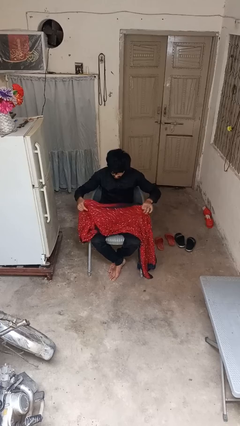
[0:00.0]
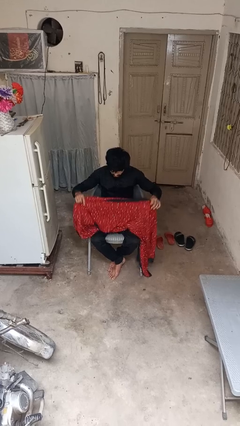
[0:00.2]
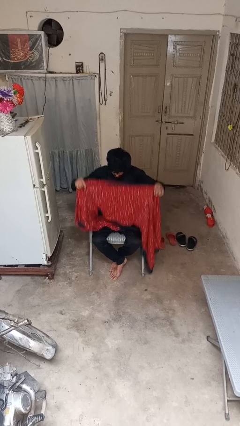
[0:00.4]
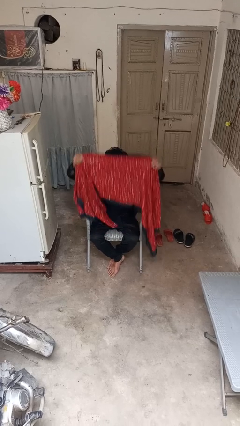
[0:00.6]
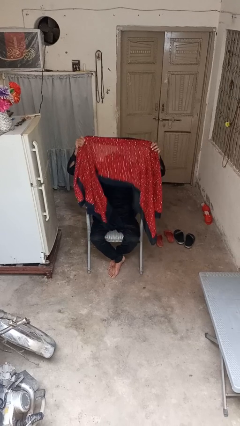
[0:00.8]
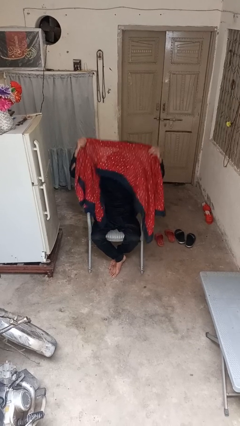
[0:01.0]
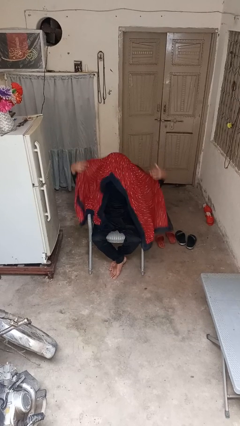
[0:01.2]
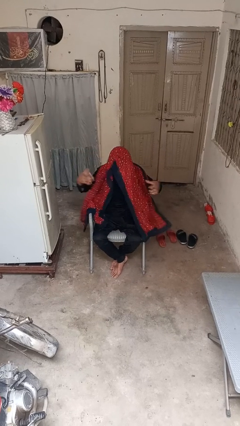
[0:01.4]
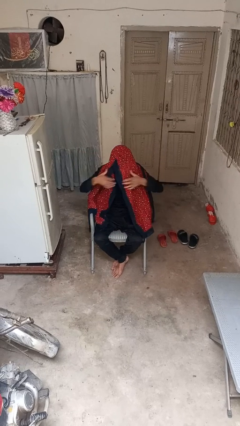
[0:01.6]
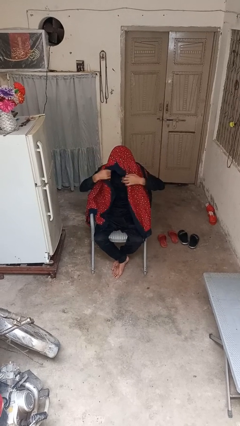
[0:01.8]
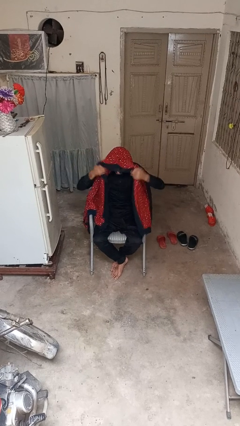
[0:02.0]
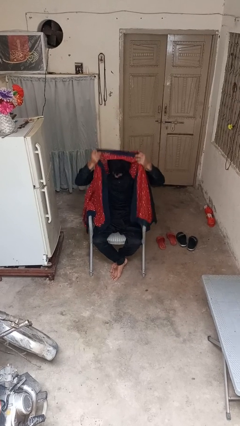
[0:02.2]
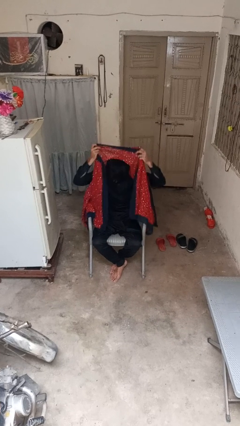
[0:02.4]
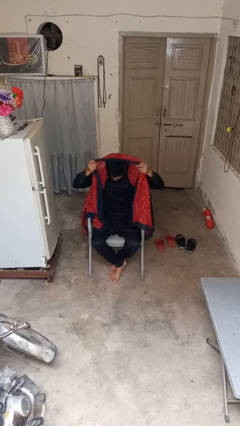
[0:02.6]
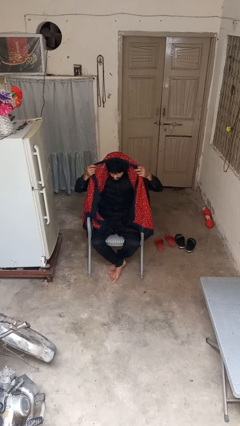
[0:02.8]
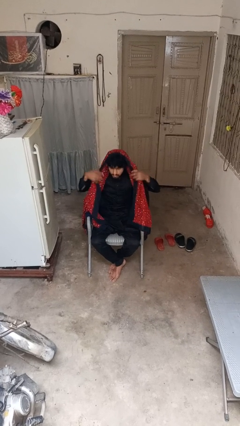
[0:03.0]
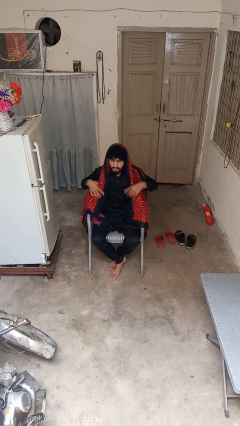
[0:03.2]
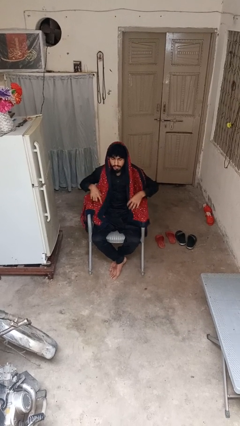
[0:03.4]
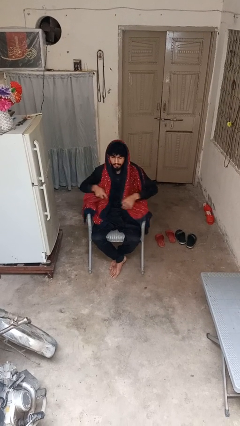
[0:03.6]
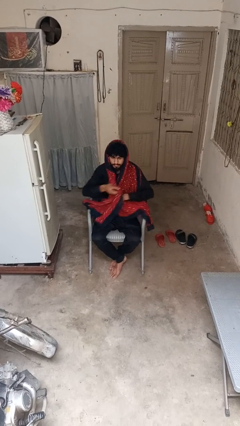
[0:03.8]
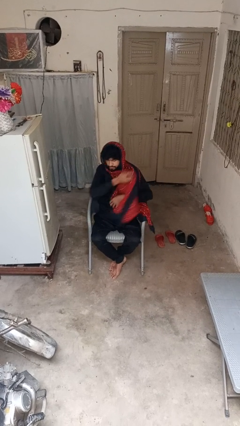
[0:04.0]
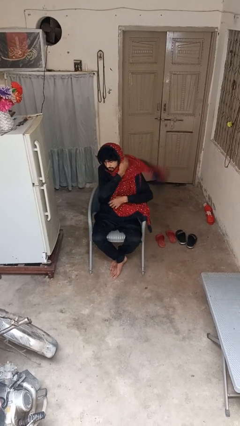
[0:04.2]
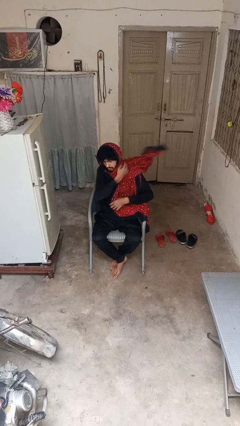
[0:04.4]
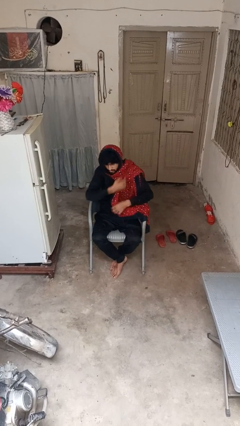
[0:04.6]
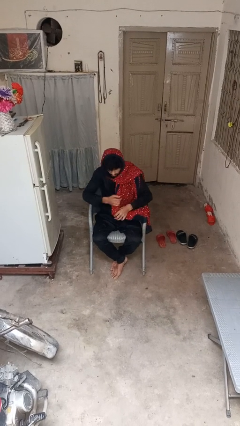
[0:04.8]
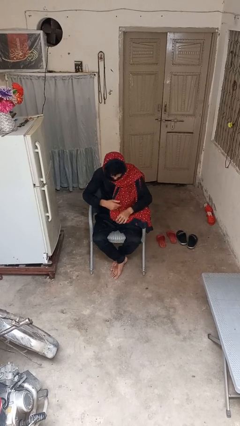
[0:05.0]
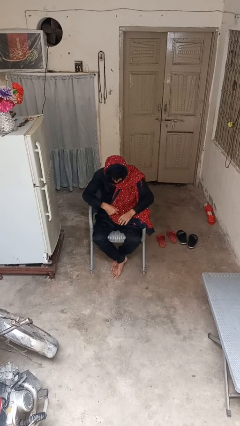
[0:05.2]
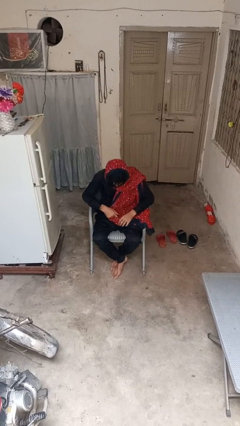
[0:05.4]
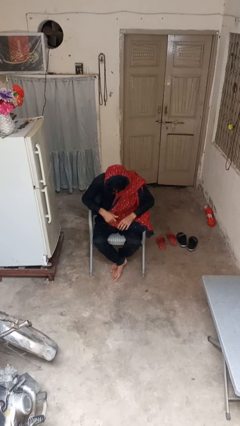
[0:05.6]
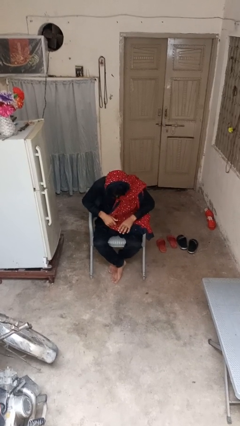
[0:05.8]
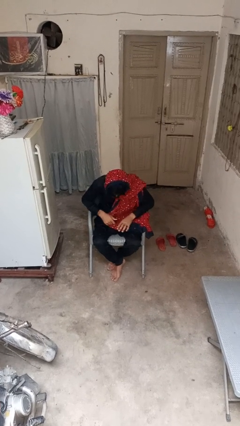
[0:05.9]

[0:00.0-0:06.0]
person puts on scarf

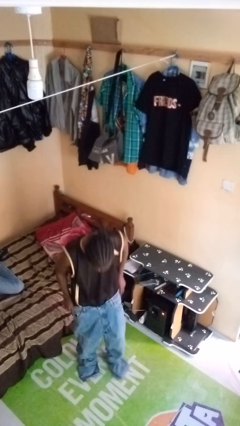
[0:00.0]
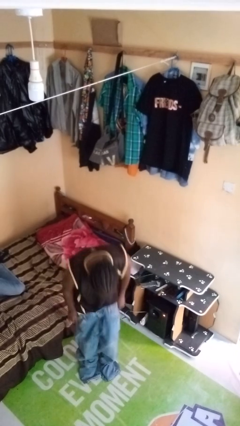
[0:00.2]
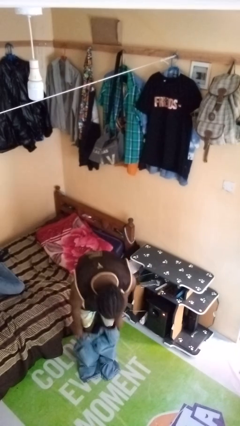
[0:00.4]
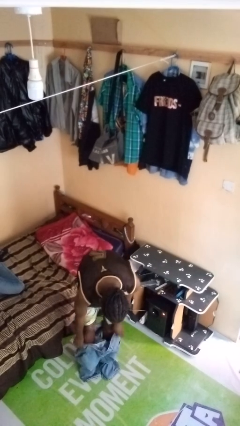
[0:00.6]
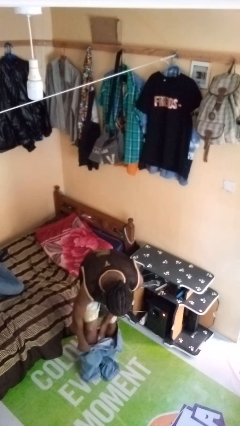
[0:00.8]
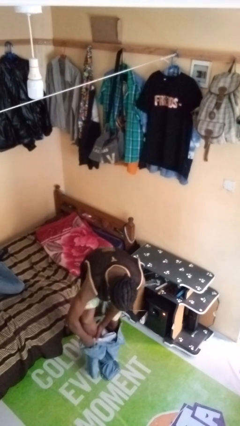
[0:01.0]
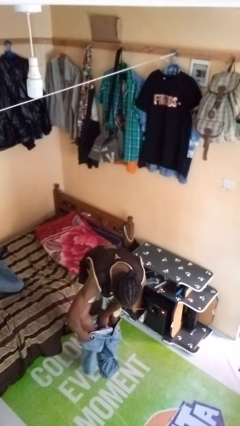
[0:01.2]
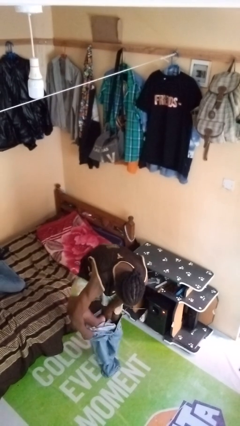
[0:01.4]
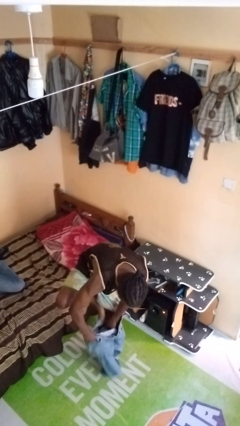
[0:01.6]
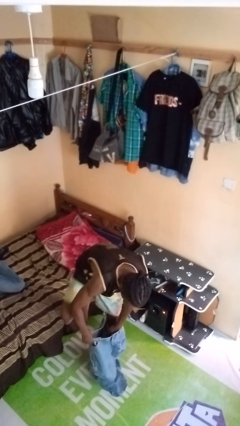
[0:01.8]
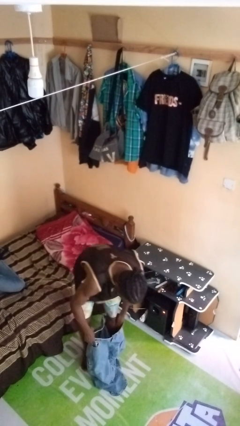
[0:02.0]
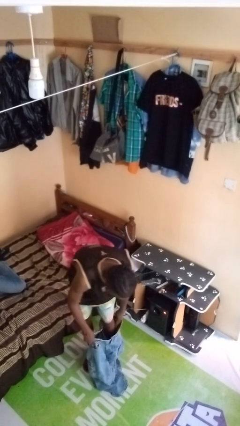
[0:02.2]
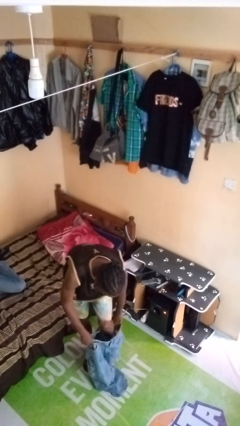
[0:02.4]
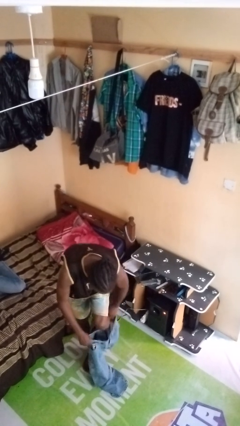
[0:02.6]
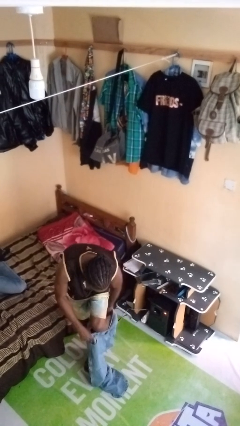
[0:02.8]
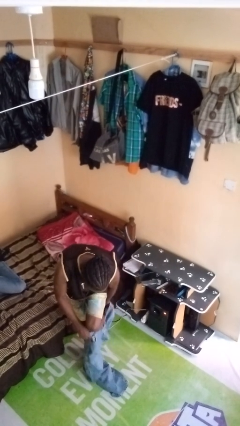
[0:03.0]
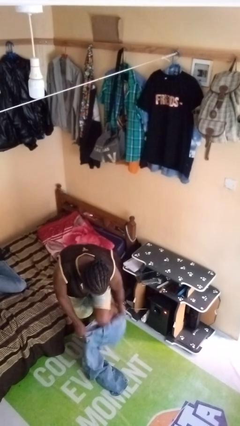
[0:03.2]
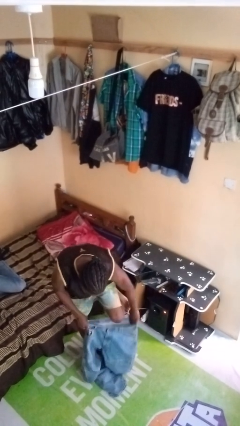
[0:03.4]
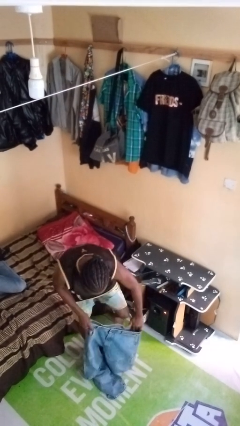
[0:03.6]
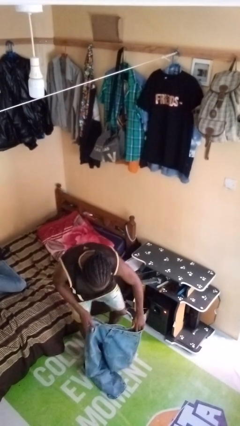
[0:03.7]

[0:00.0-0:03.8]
person takes off pants

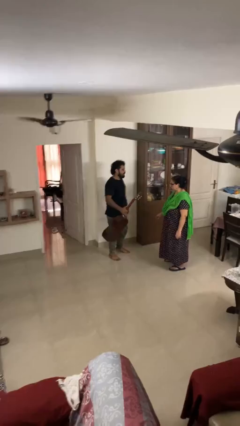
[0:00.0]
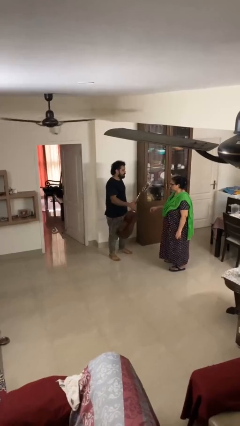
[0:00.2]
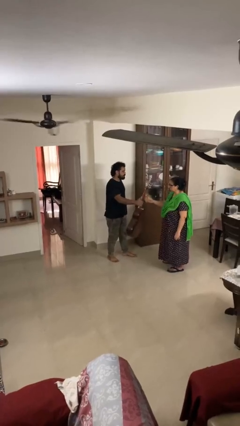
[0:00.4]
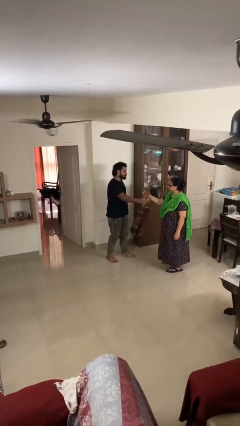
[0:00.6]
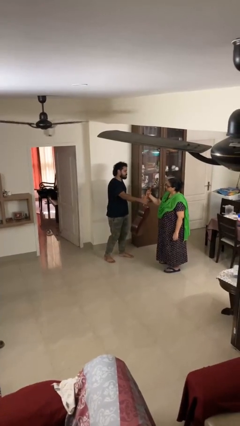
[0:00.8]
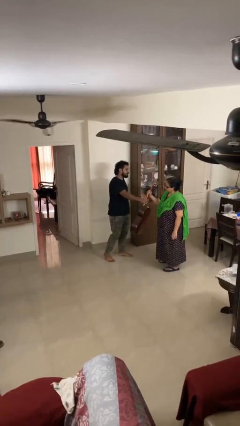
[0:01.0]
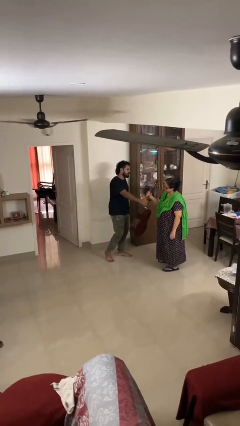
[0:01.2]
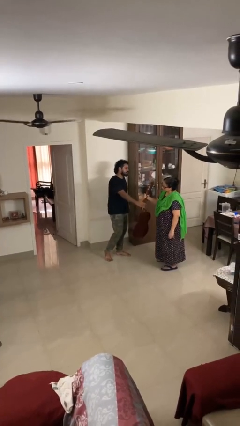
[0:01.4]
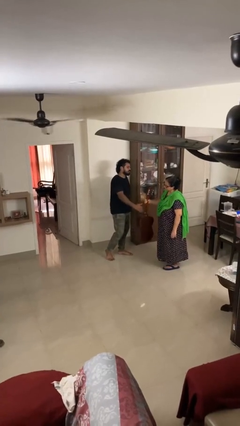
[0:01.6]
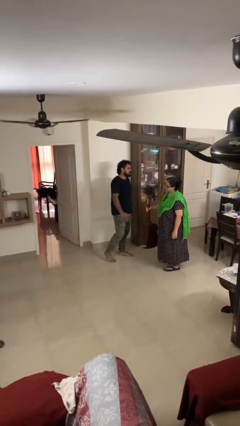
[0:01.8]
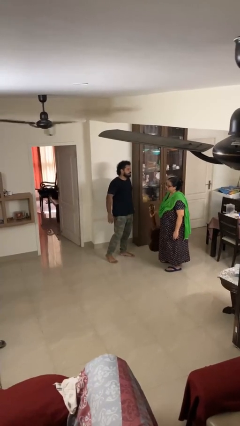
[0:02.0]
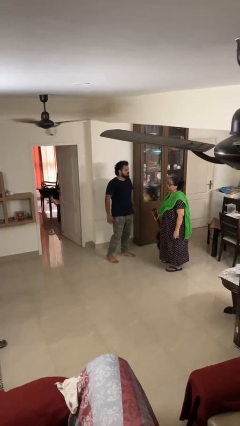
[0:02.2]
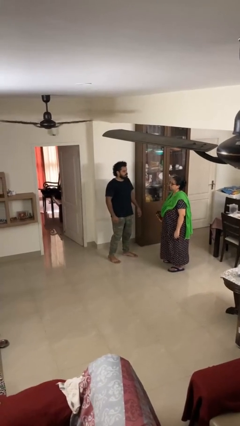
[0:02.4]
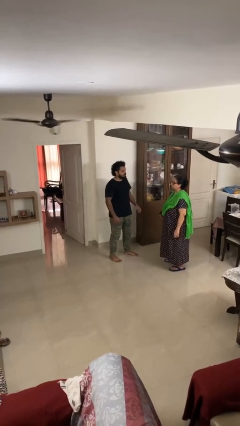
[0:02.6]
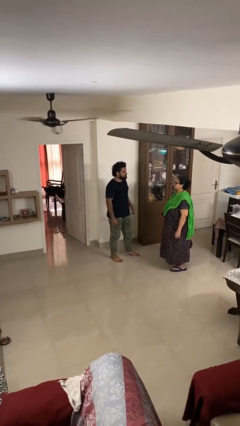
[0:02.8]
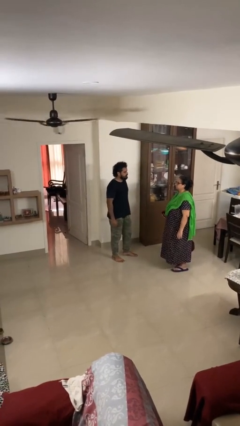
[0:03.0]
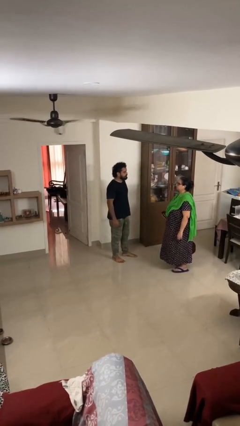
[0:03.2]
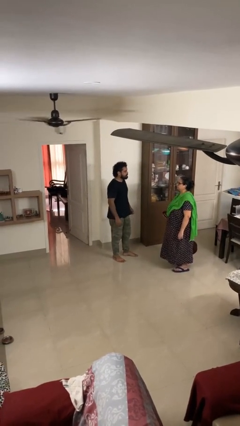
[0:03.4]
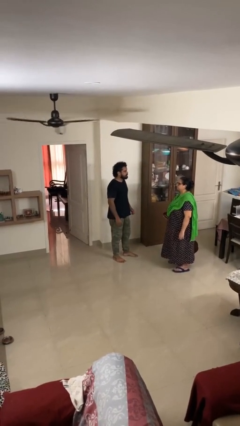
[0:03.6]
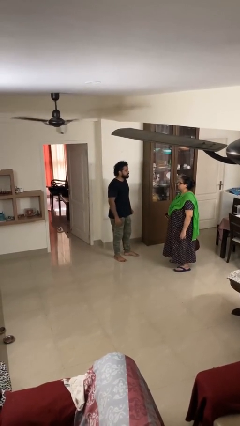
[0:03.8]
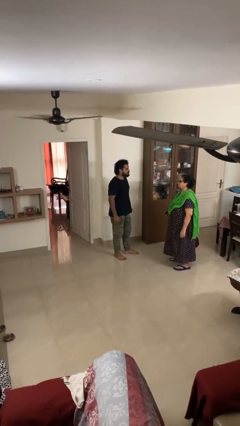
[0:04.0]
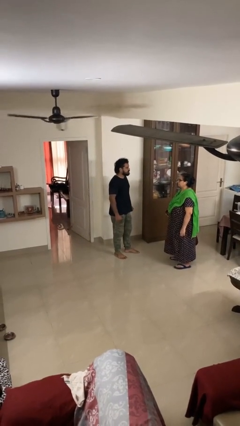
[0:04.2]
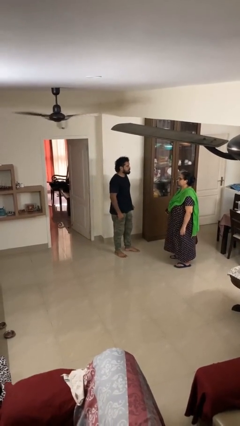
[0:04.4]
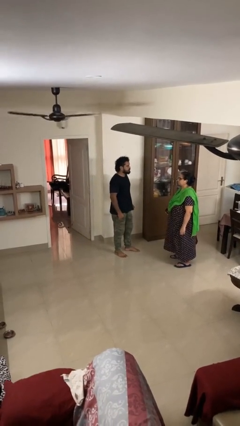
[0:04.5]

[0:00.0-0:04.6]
person transfers object to person

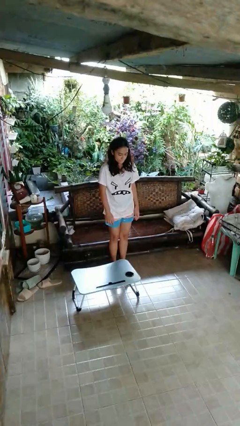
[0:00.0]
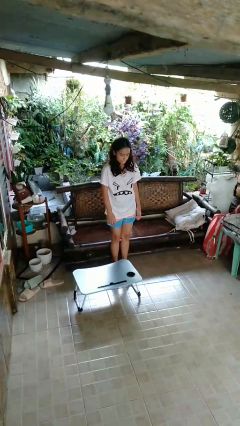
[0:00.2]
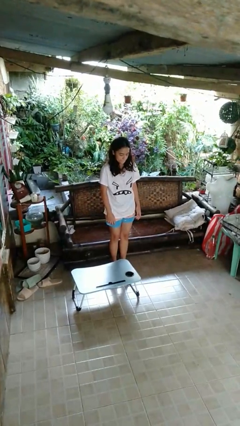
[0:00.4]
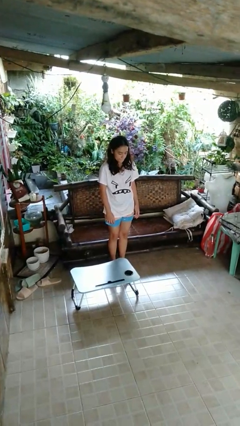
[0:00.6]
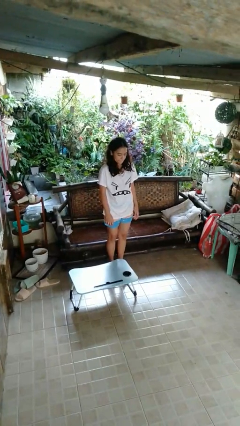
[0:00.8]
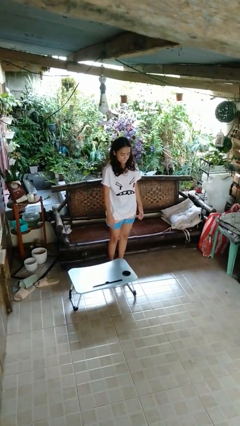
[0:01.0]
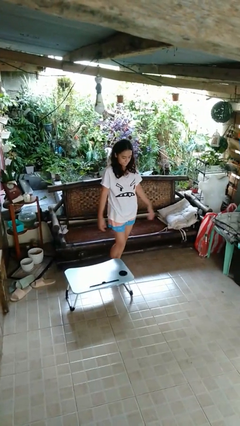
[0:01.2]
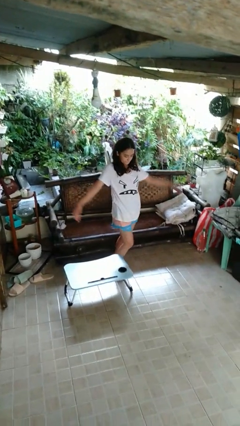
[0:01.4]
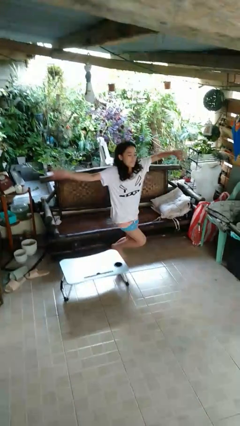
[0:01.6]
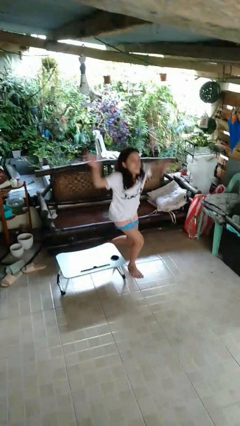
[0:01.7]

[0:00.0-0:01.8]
person trips on object on floor

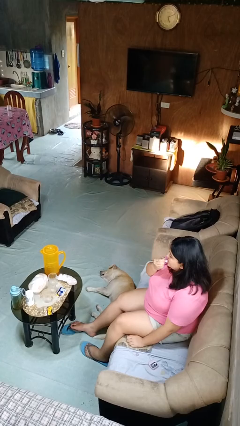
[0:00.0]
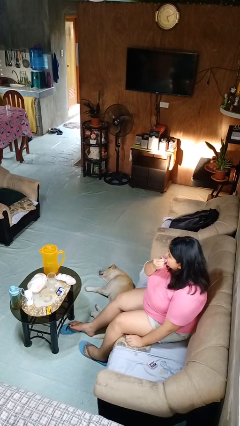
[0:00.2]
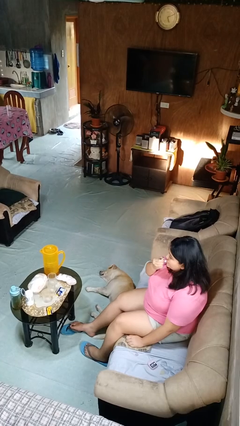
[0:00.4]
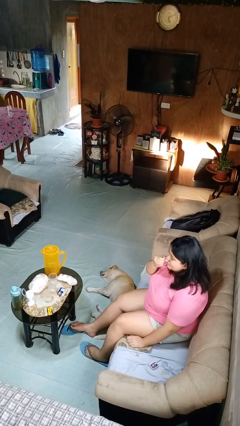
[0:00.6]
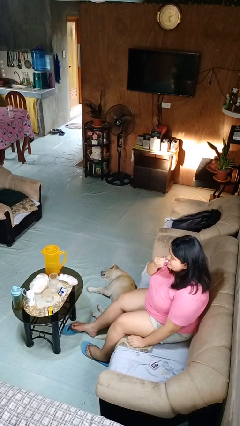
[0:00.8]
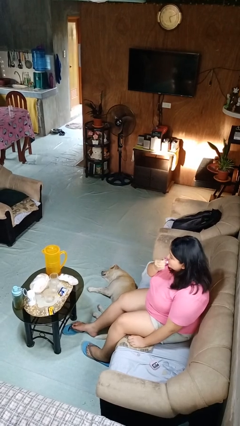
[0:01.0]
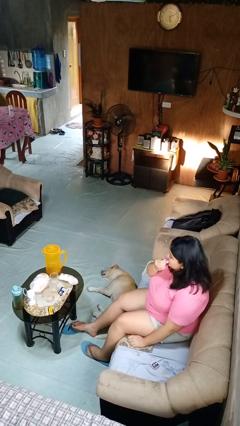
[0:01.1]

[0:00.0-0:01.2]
person applies lip makeup

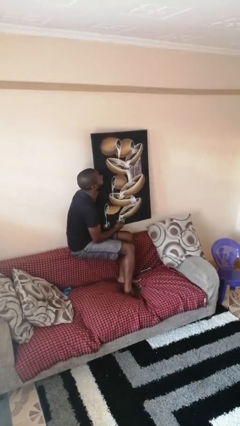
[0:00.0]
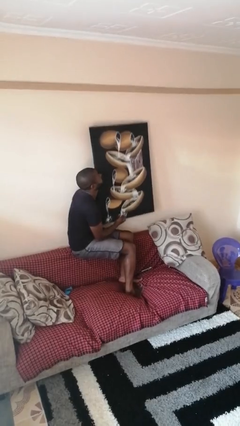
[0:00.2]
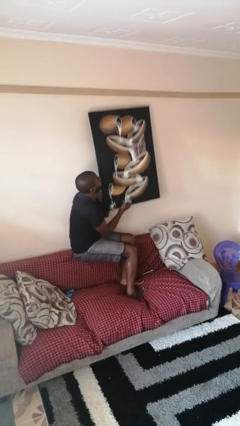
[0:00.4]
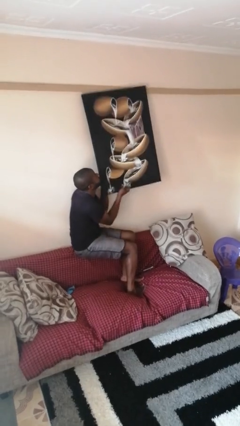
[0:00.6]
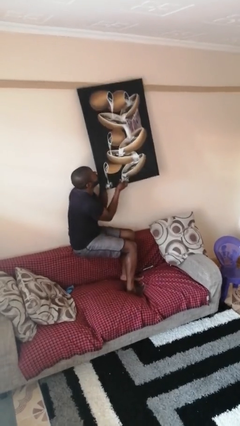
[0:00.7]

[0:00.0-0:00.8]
person takes down picture frame
